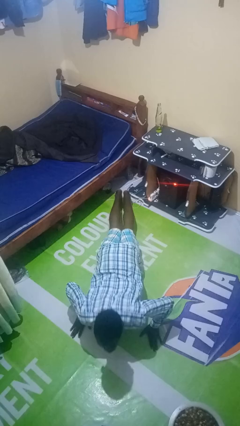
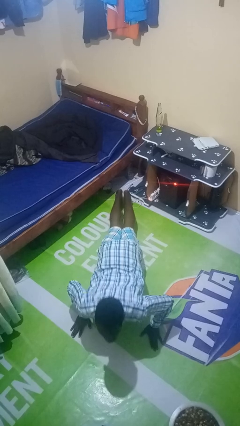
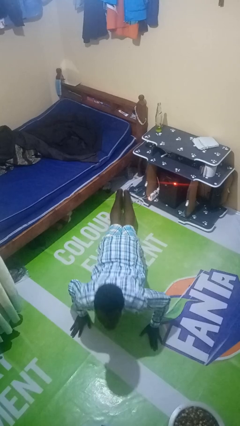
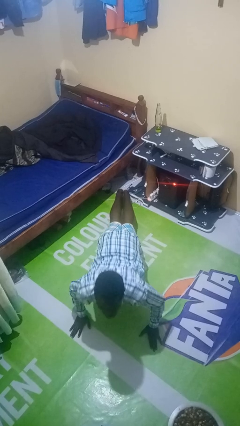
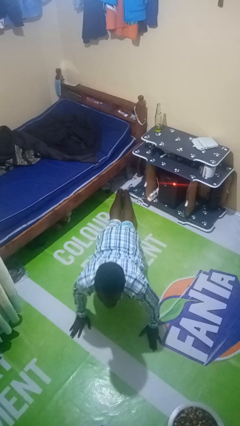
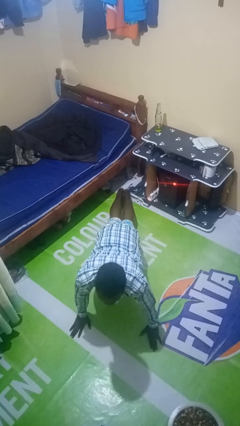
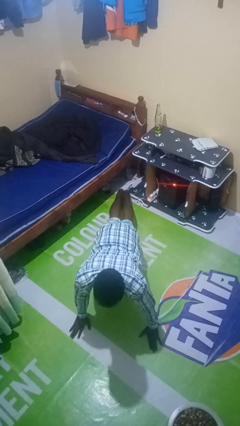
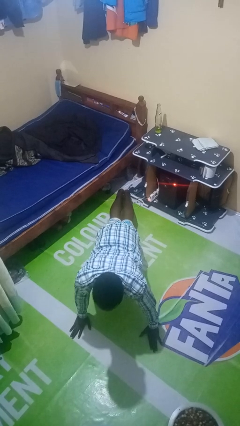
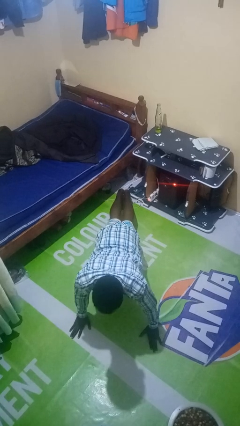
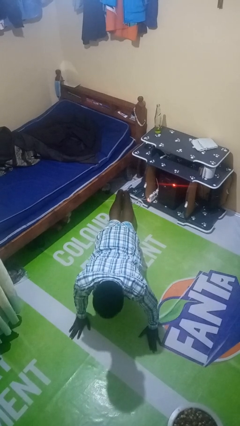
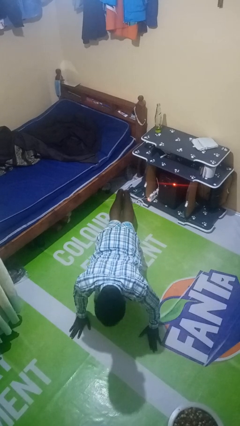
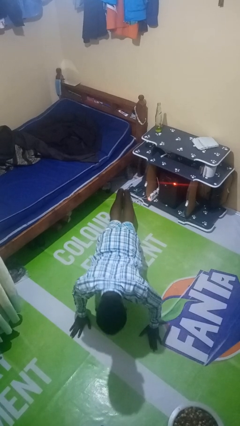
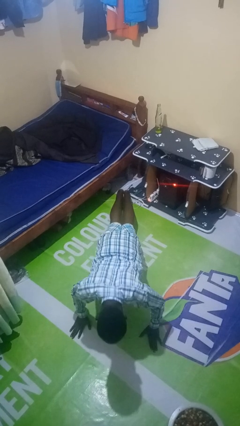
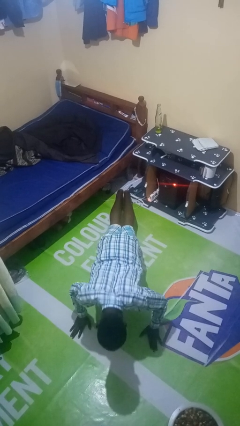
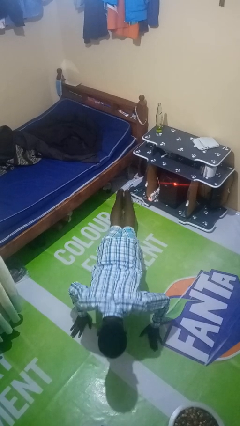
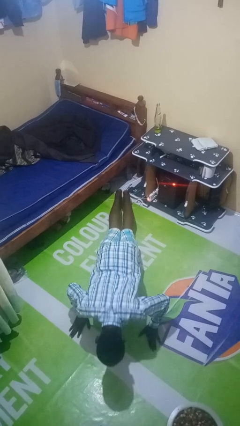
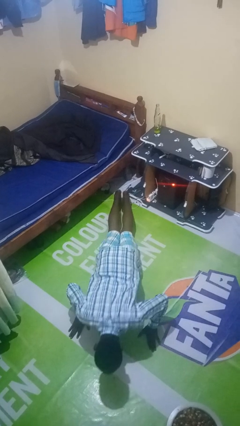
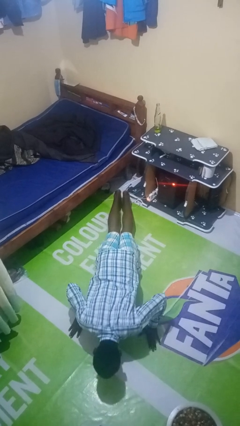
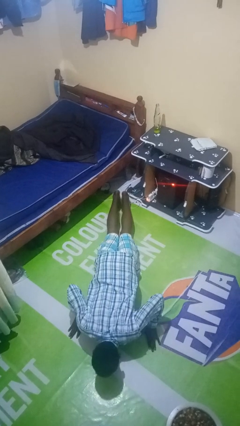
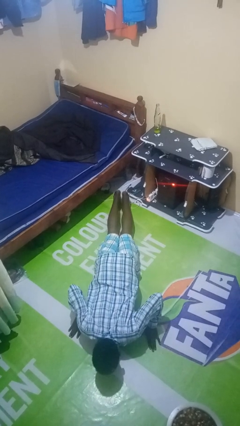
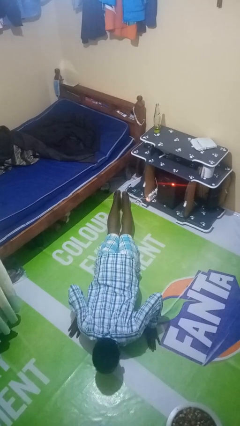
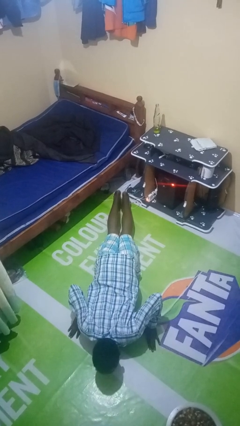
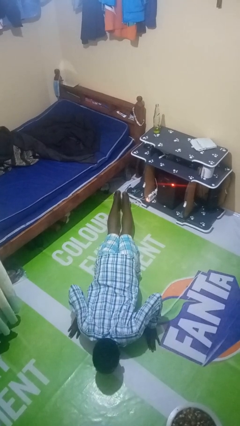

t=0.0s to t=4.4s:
person exercises with pushup

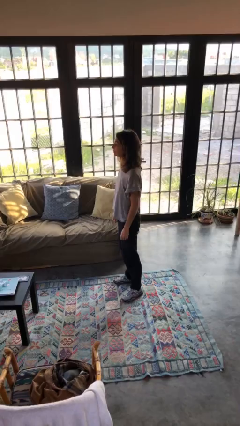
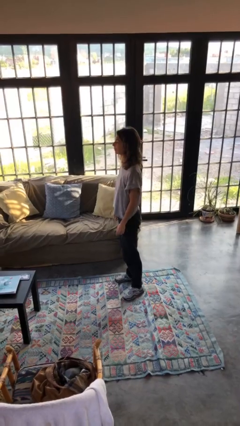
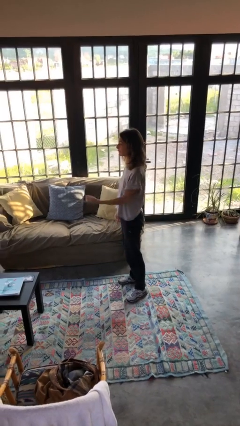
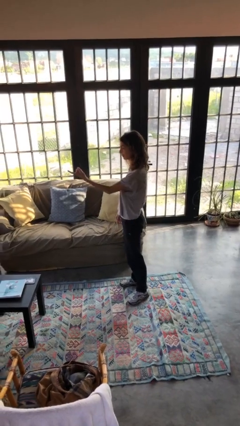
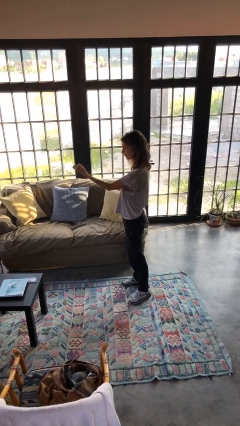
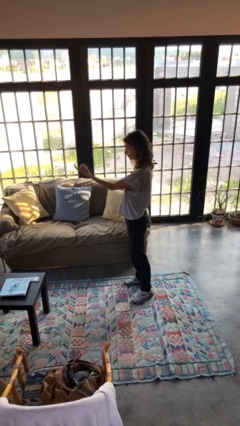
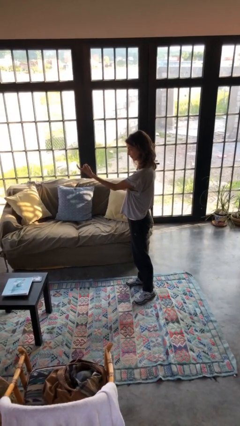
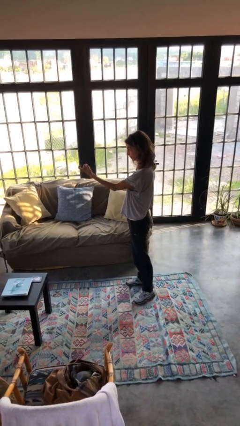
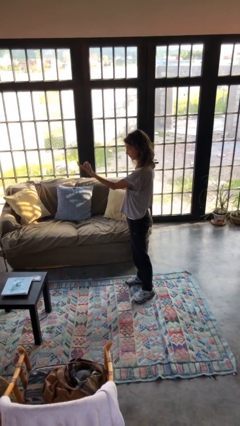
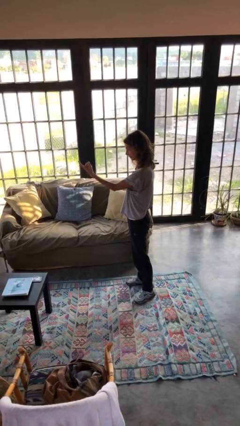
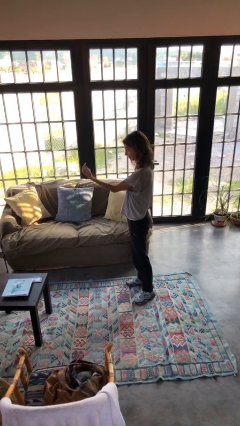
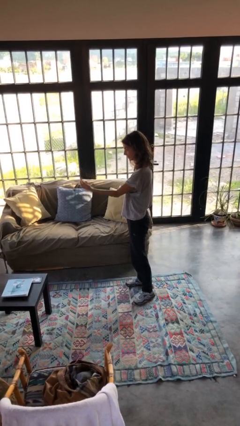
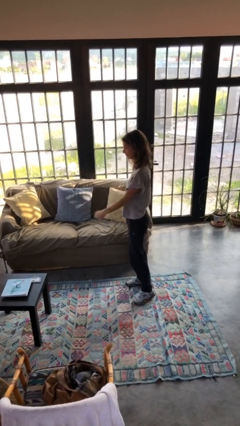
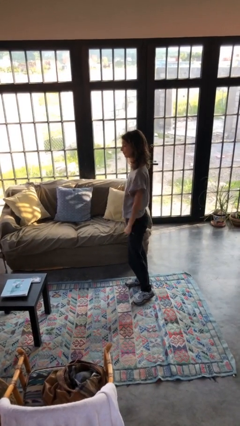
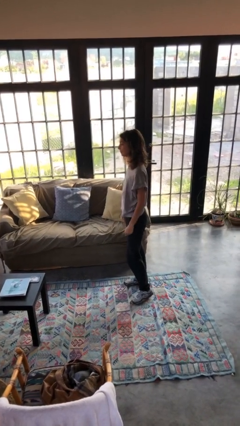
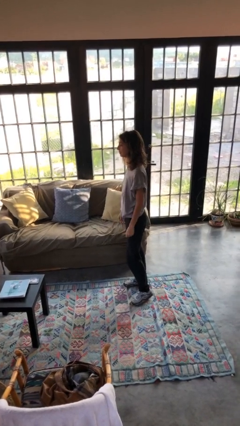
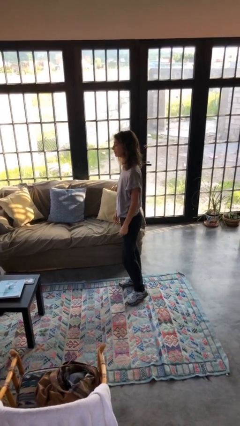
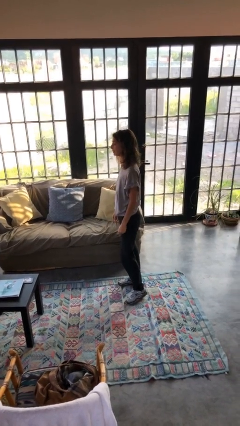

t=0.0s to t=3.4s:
person gestures come here

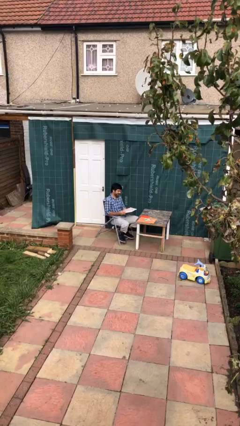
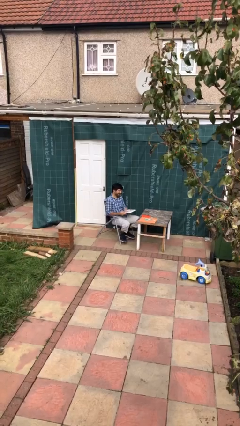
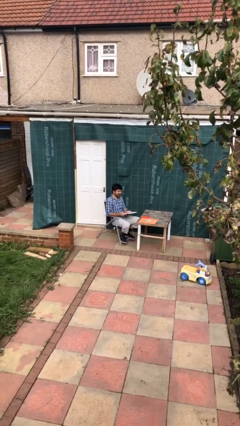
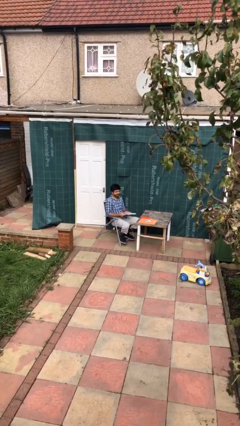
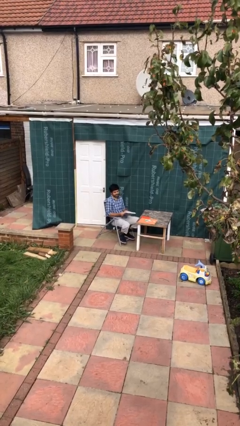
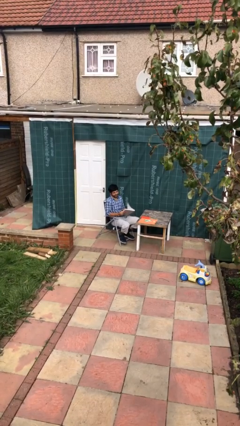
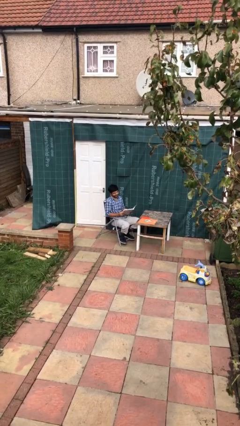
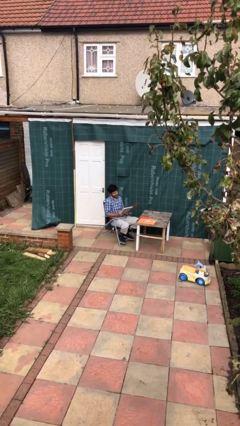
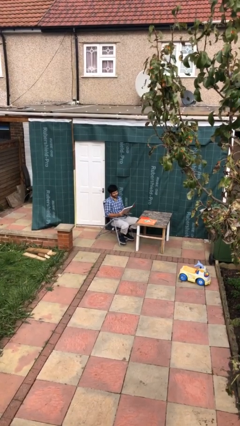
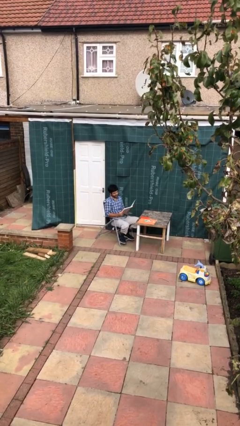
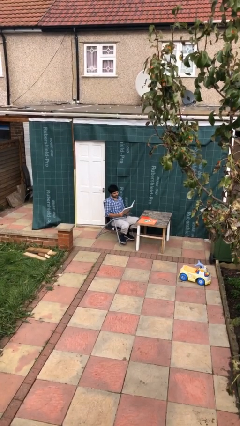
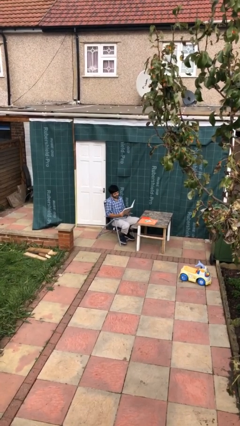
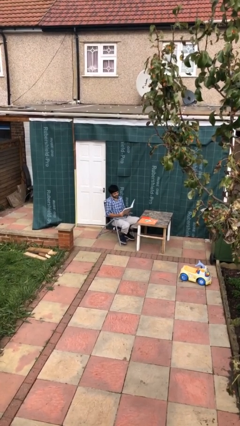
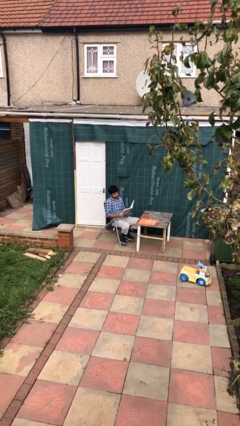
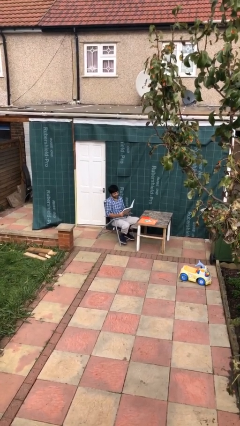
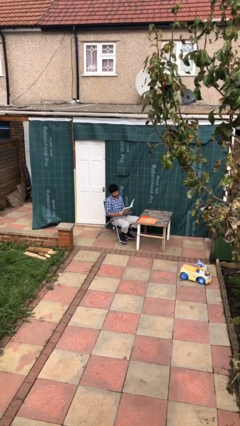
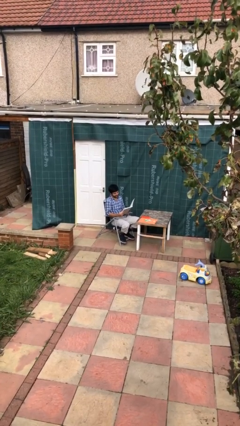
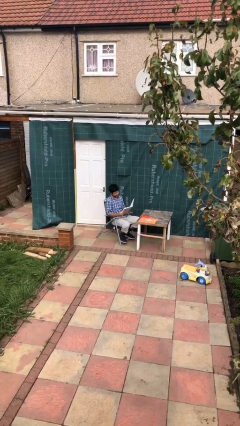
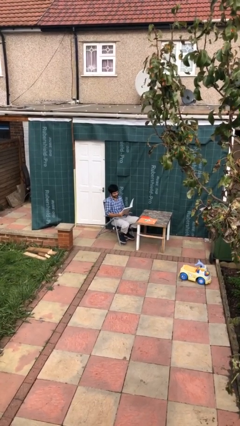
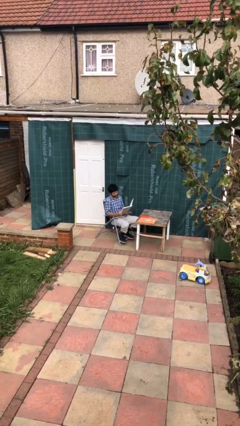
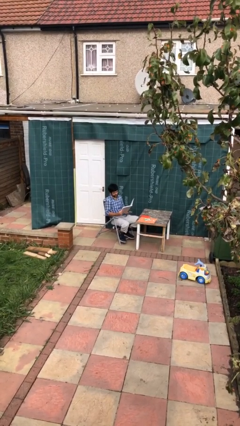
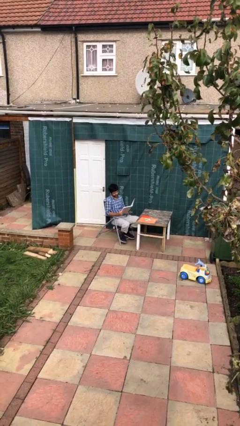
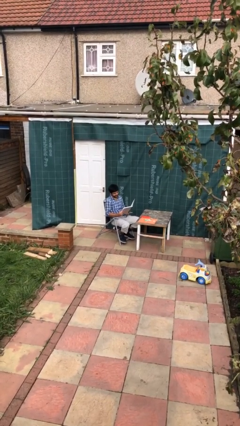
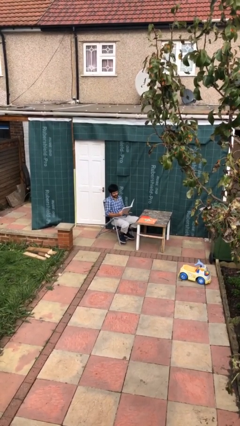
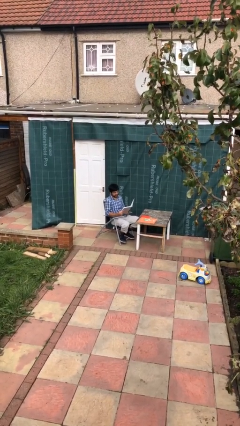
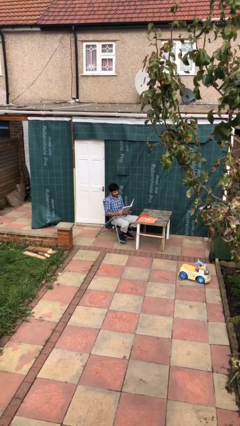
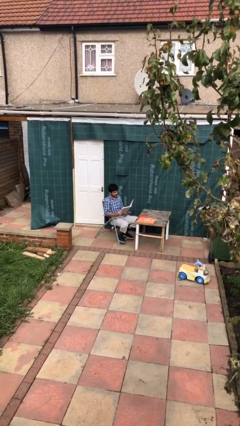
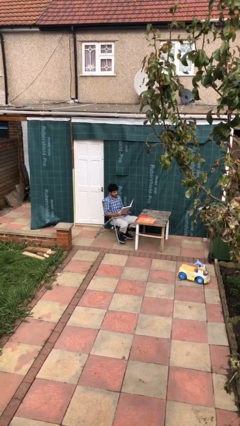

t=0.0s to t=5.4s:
person reads document

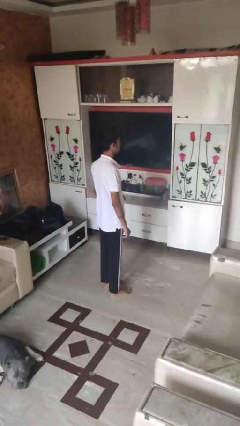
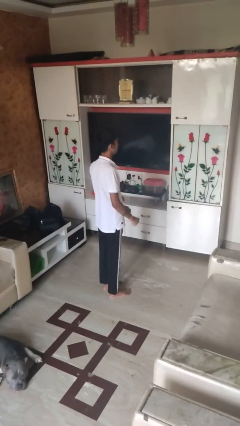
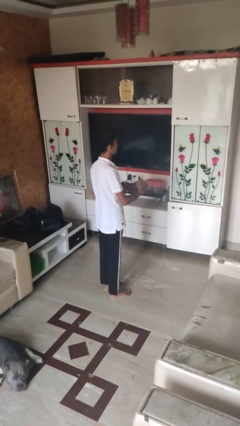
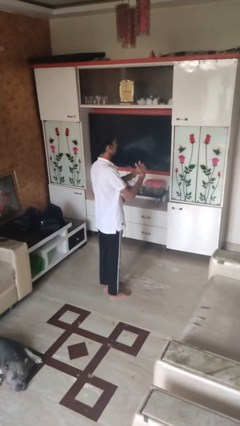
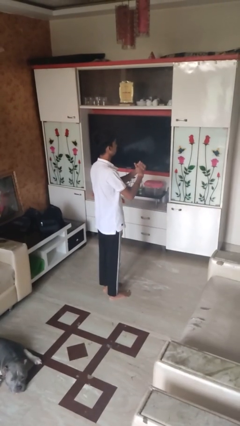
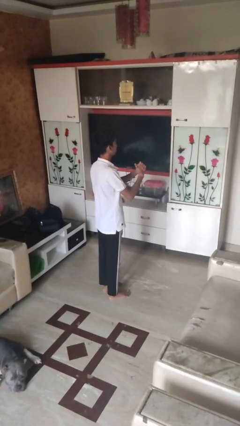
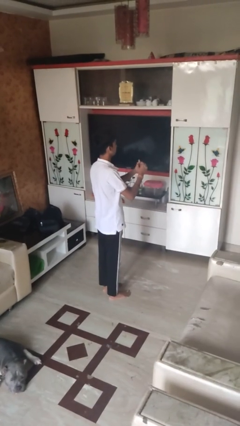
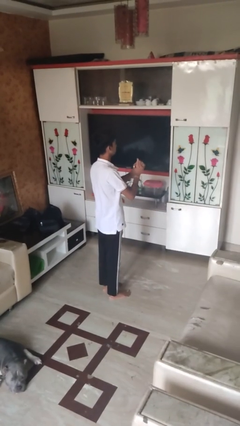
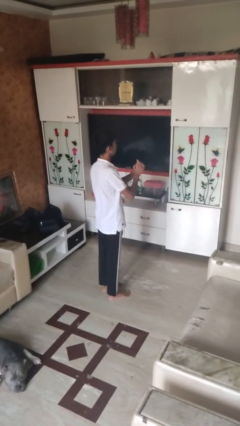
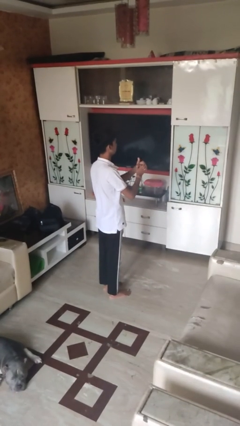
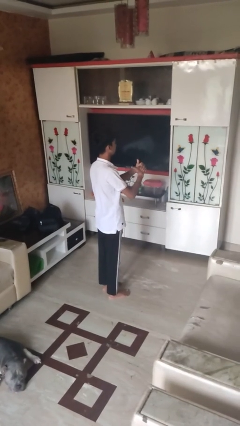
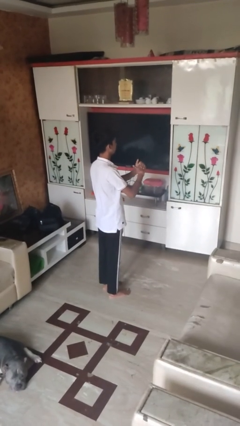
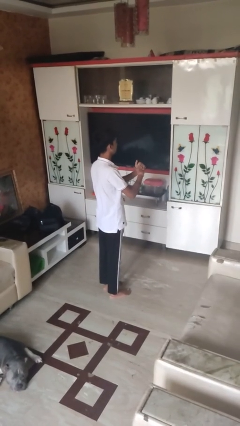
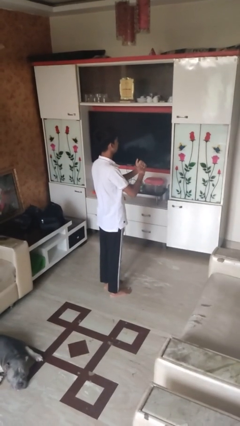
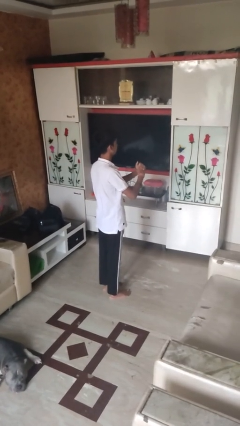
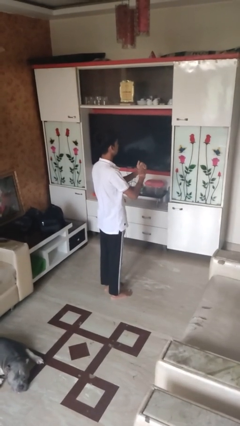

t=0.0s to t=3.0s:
person cracks knuckles

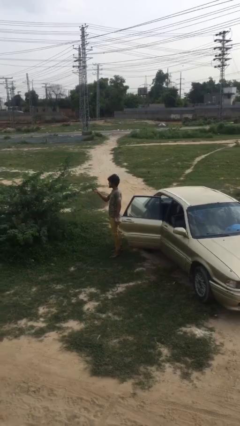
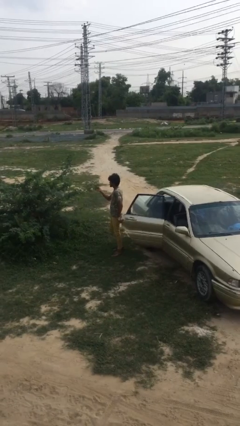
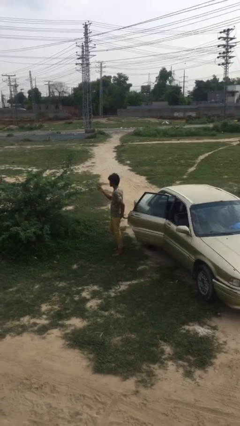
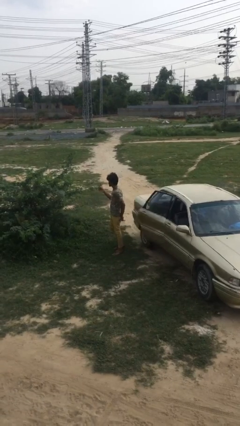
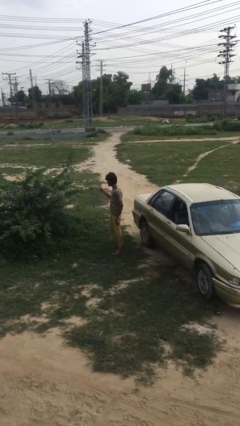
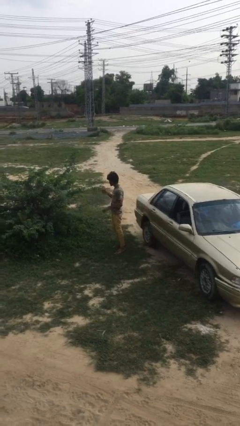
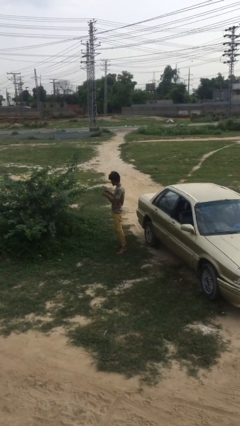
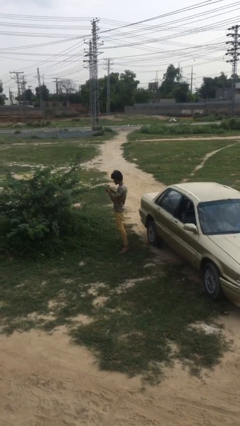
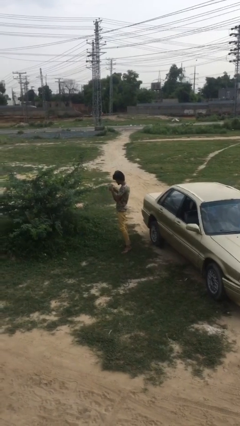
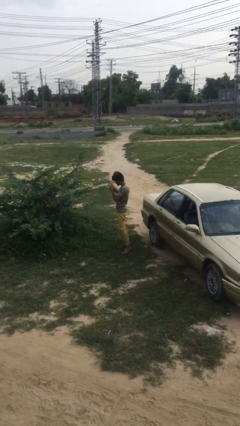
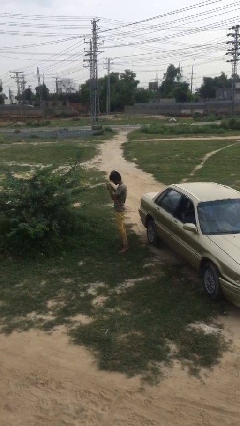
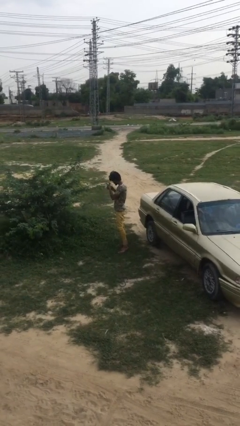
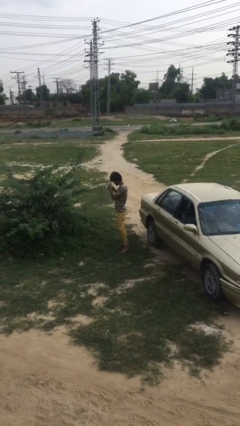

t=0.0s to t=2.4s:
person closes car door
